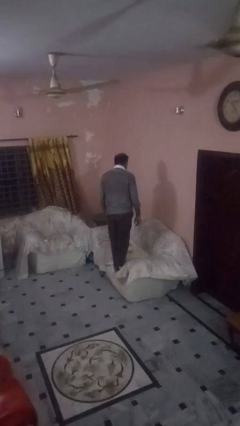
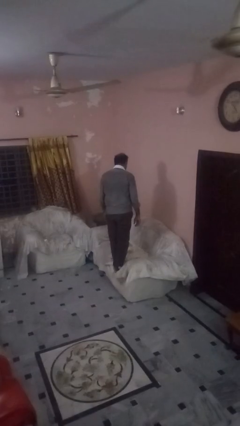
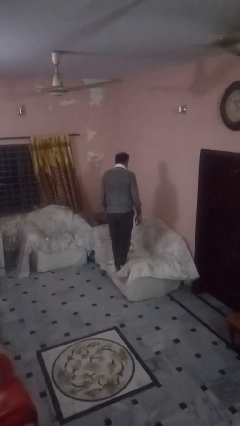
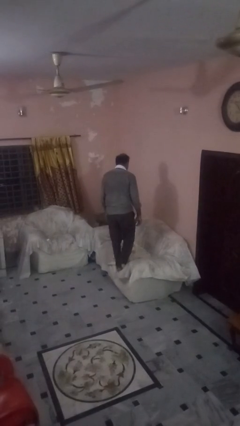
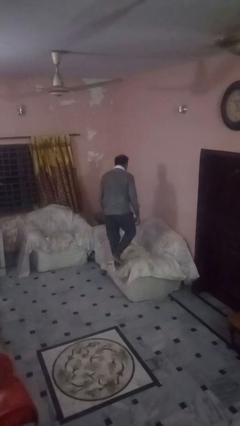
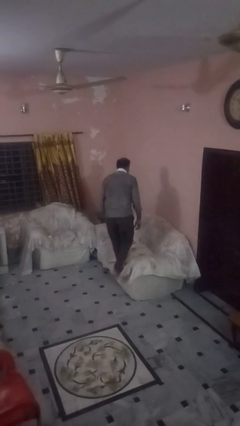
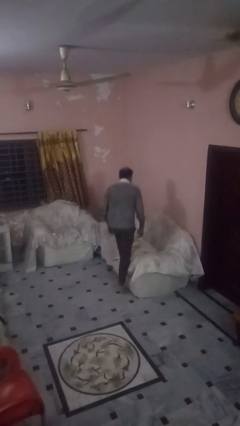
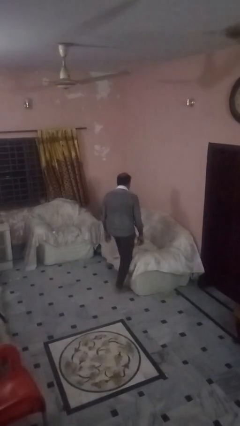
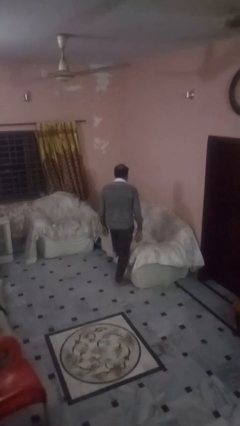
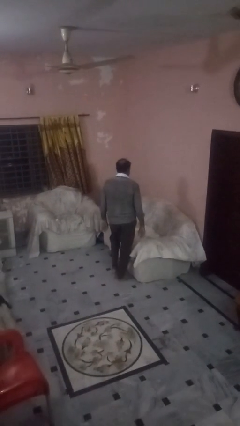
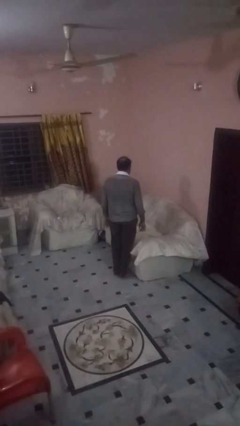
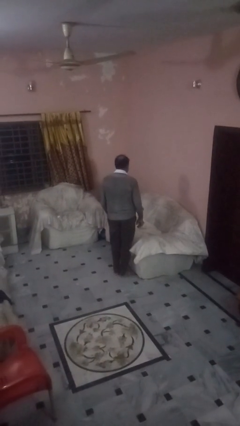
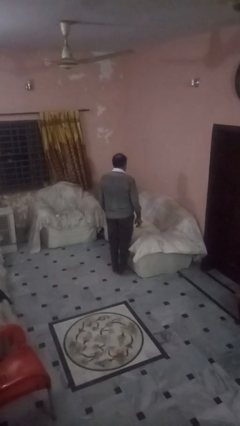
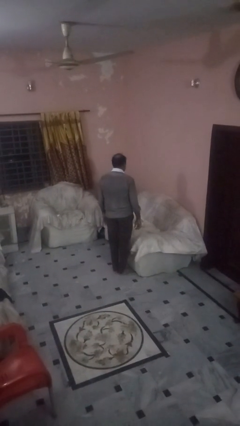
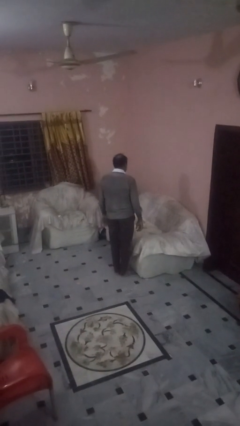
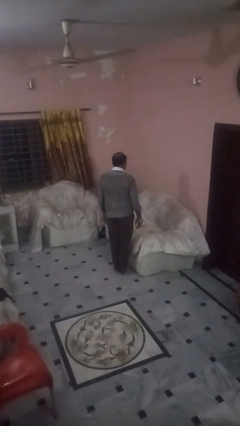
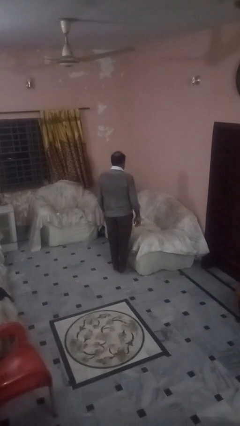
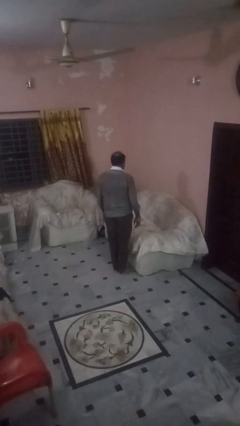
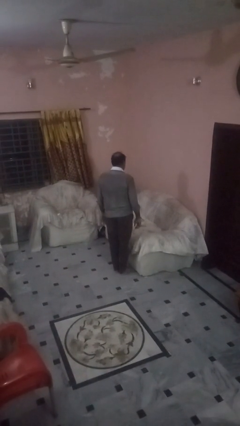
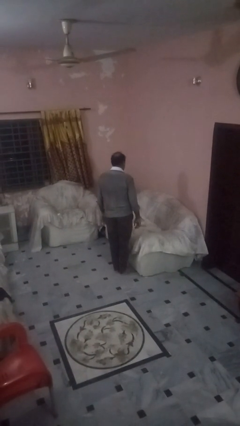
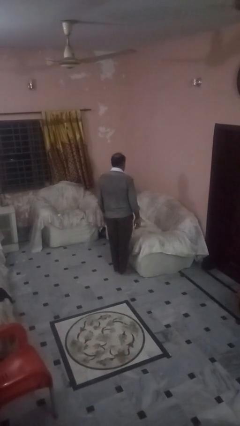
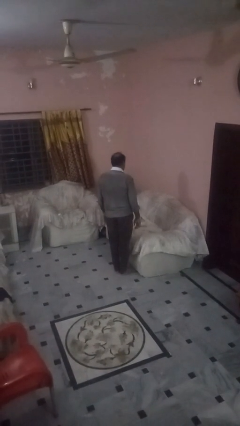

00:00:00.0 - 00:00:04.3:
person climbs off couch

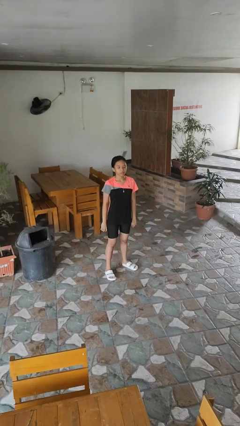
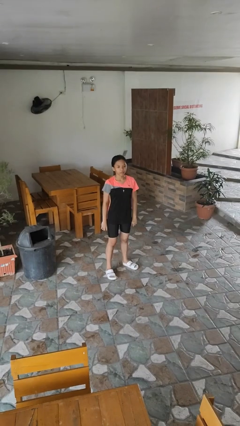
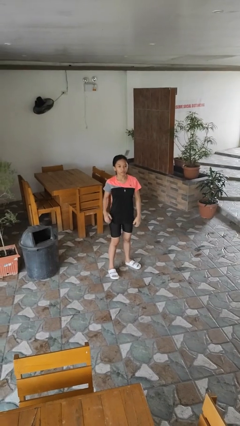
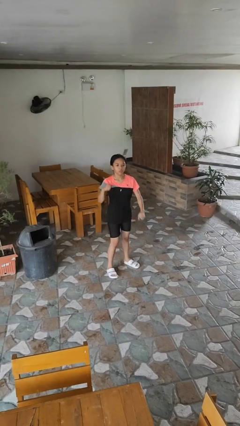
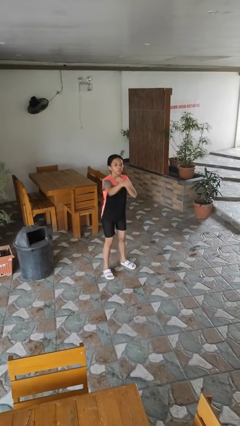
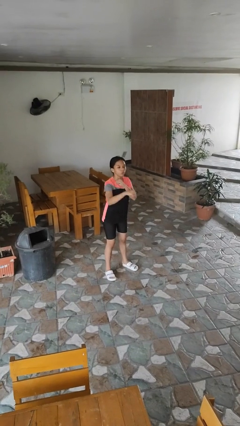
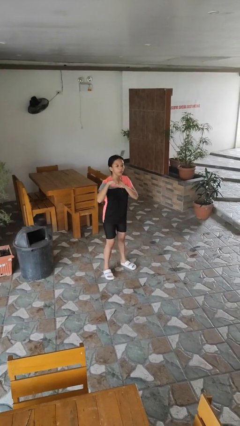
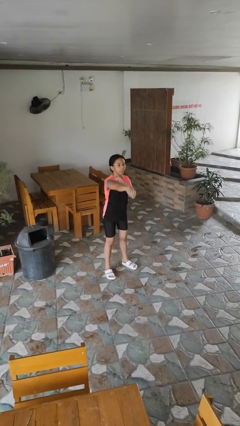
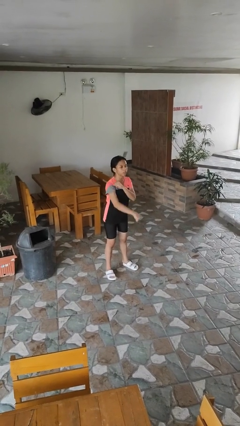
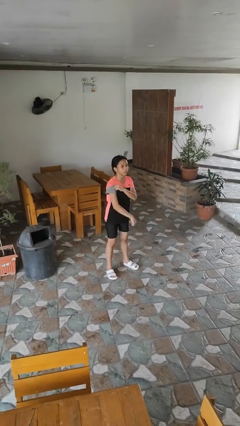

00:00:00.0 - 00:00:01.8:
person punches

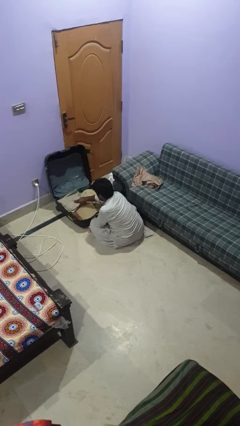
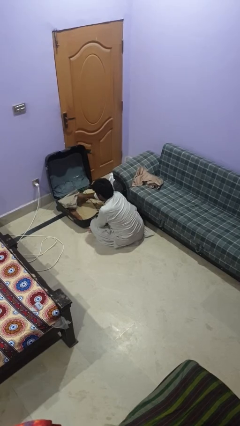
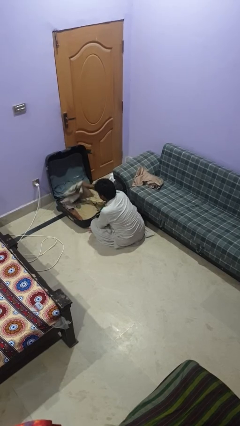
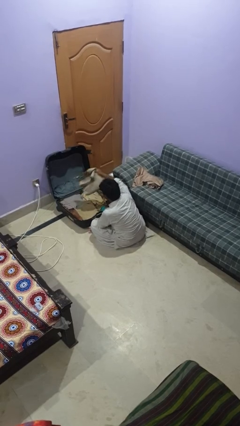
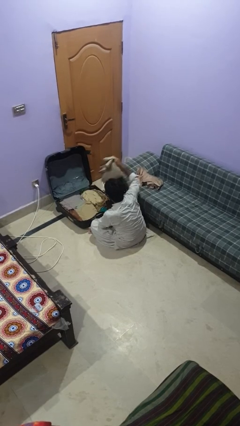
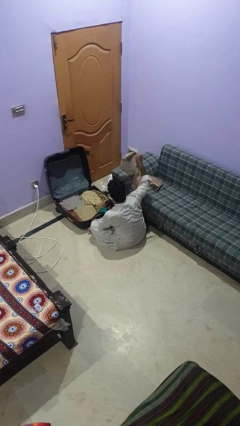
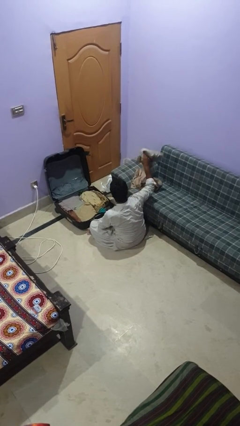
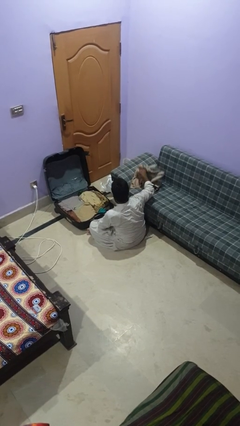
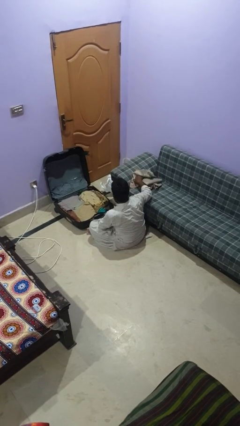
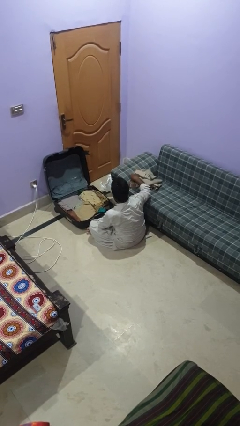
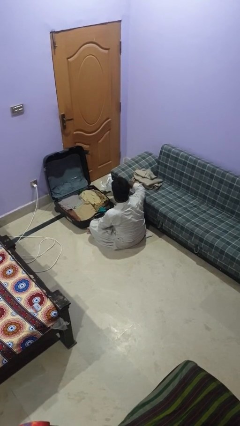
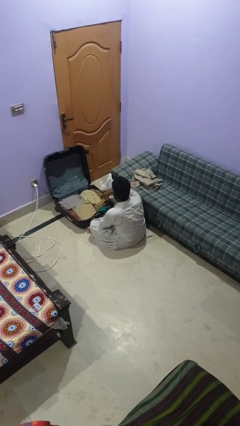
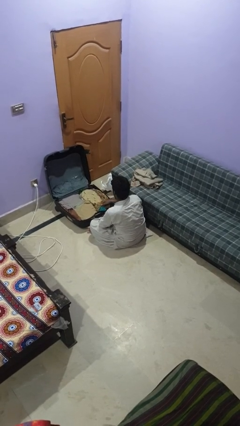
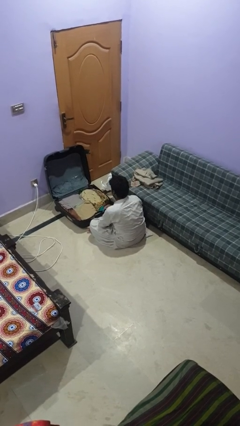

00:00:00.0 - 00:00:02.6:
person unloads clothes from suitcase

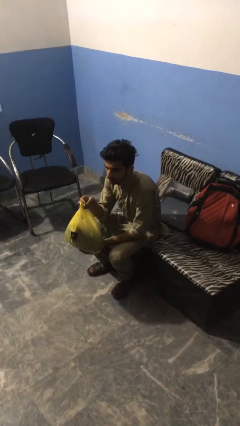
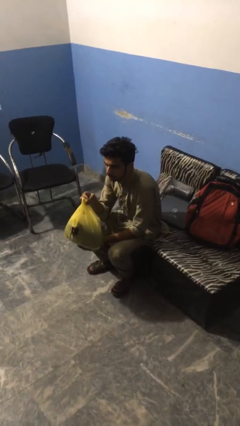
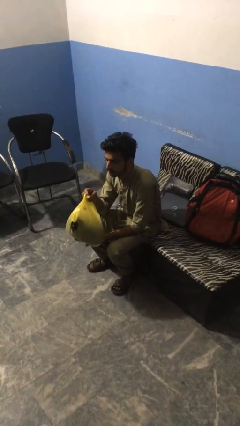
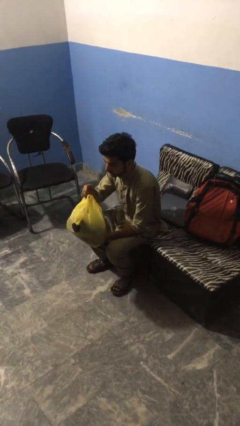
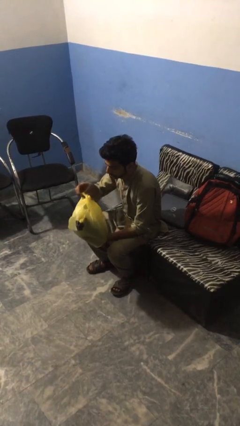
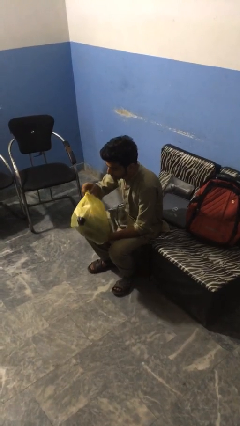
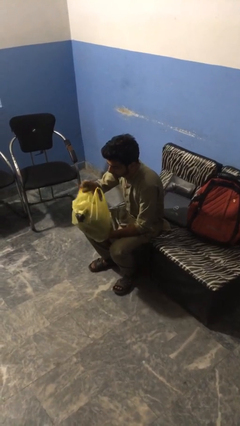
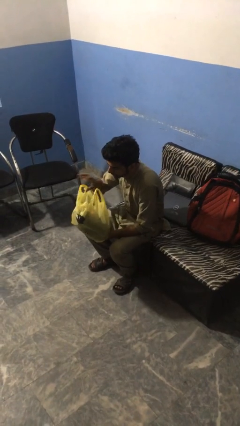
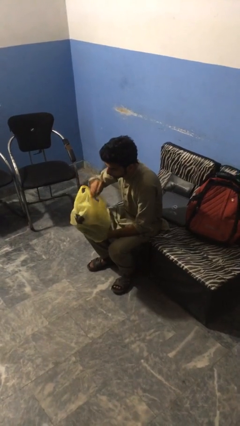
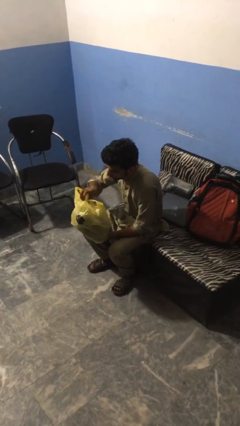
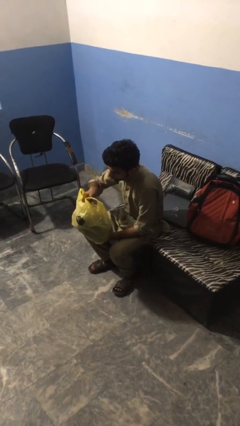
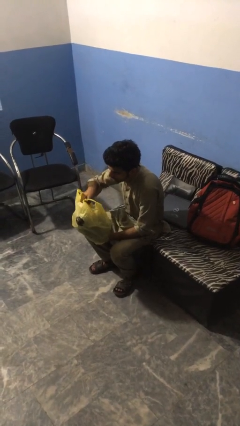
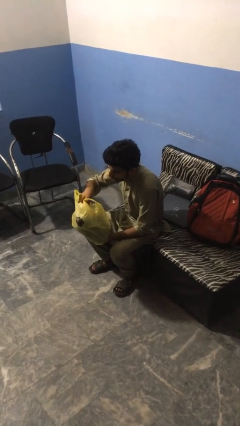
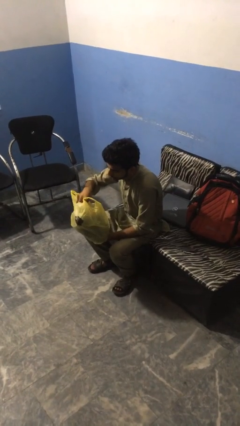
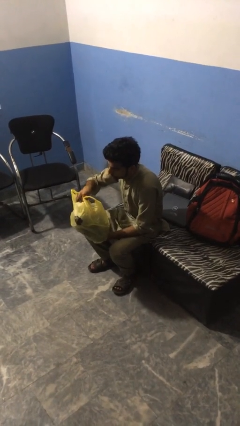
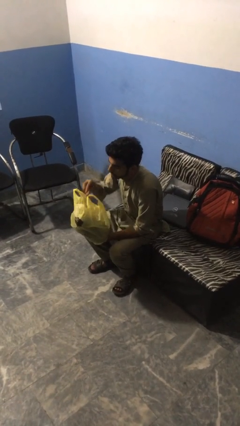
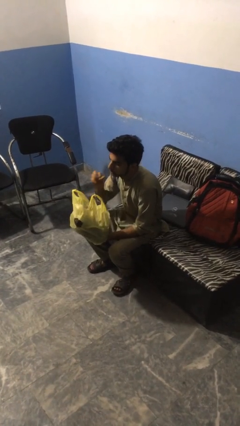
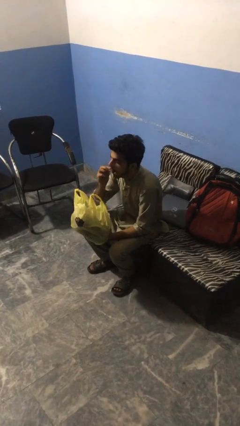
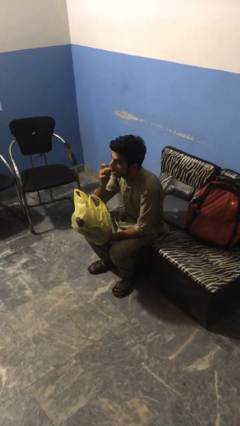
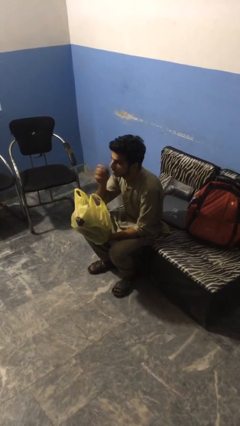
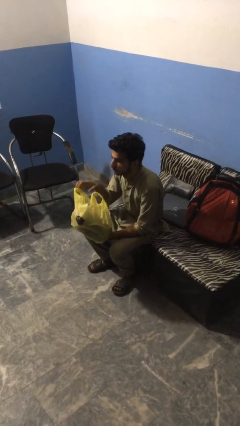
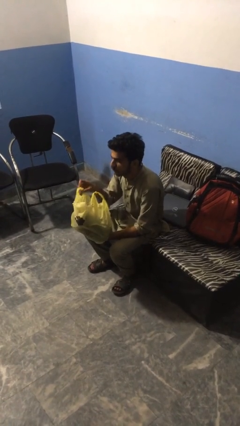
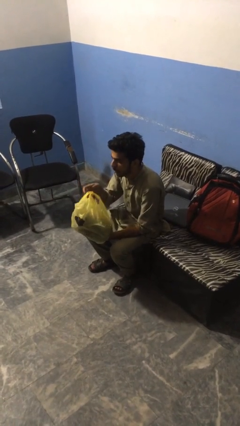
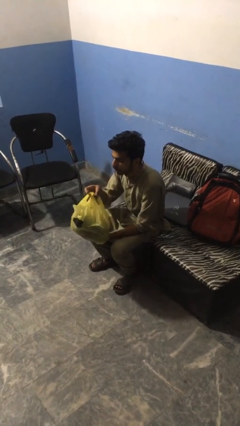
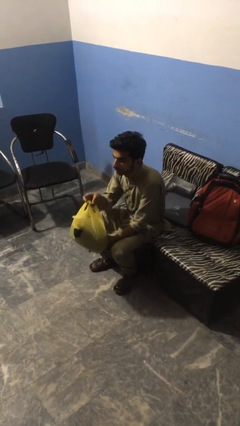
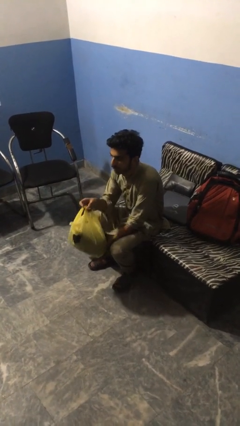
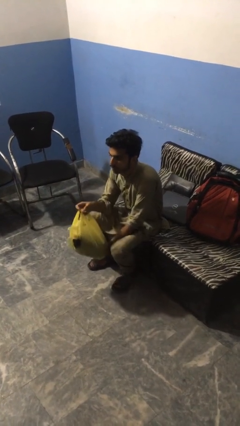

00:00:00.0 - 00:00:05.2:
person eats snack from bag

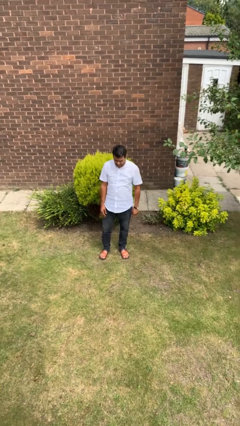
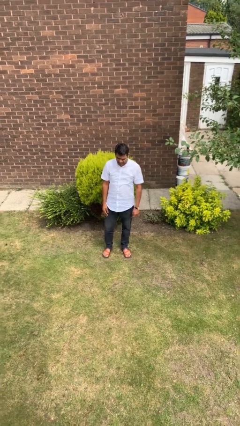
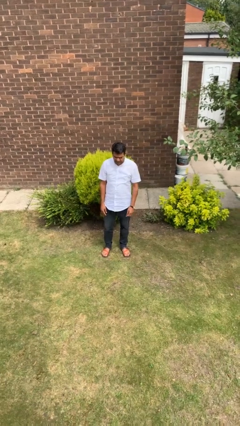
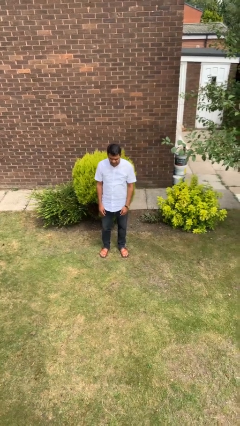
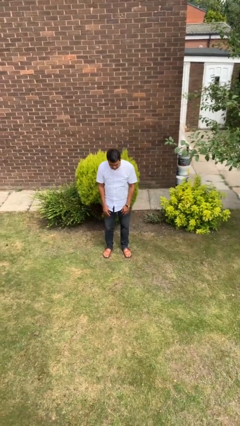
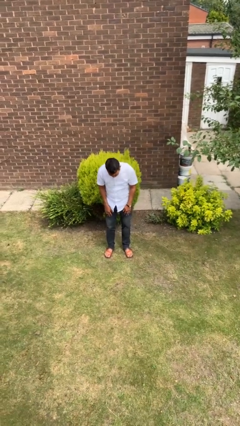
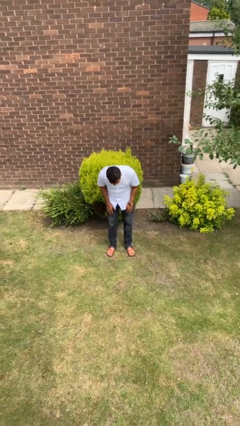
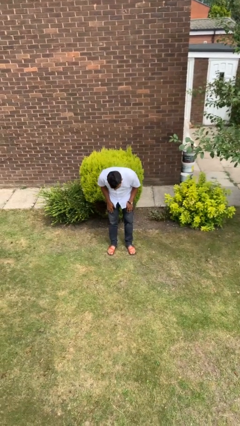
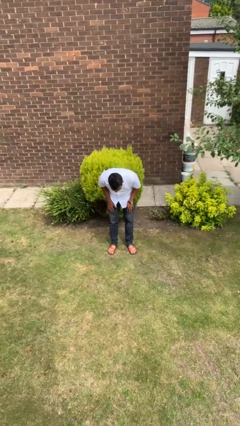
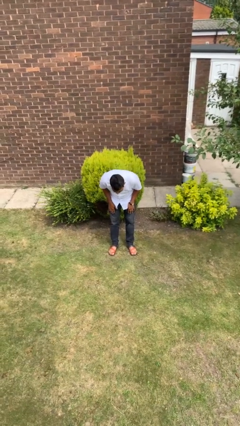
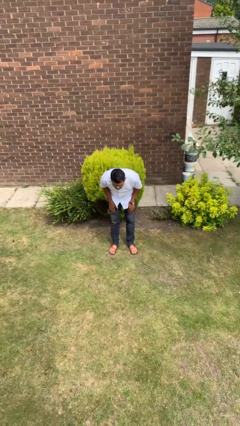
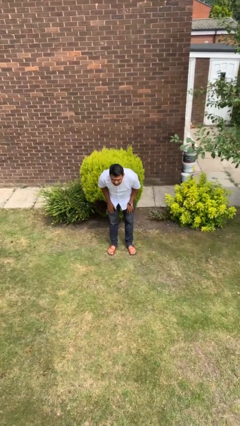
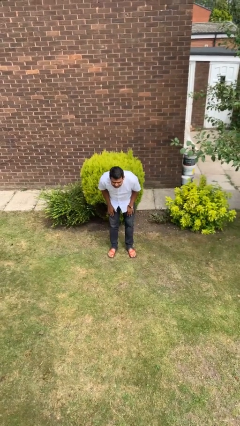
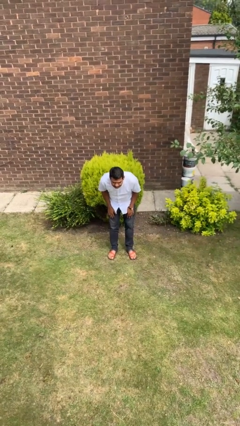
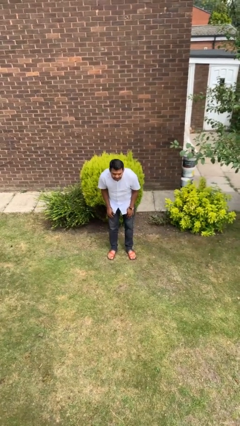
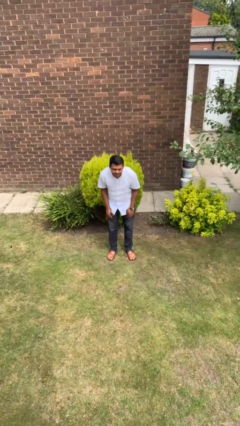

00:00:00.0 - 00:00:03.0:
person bows

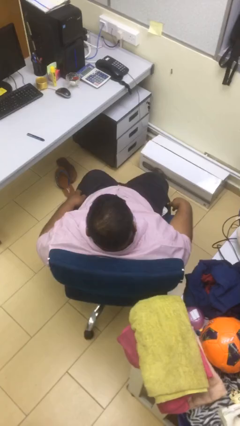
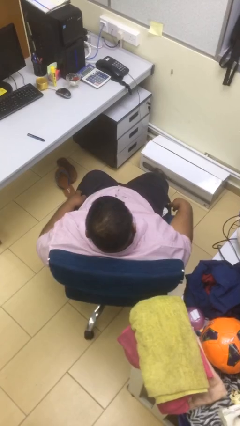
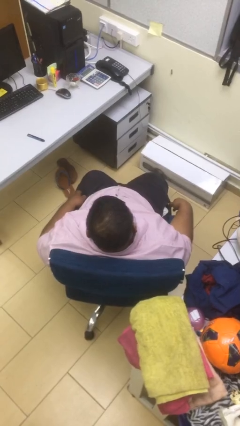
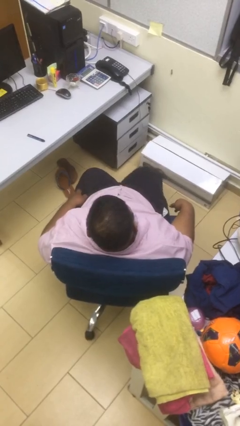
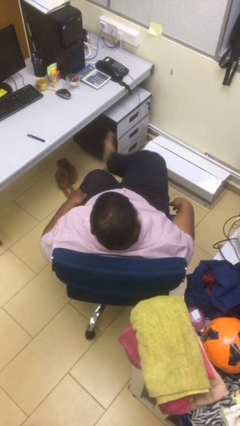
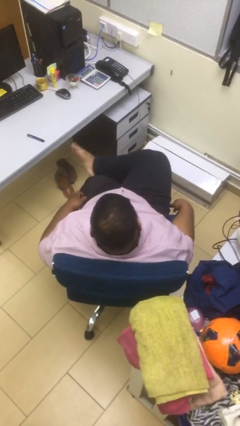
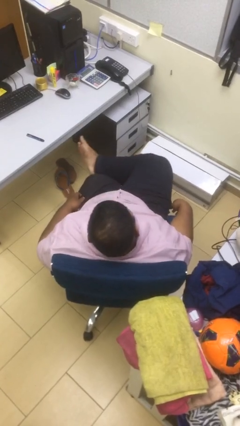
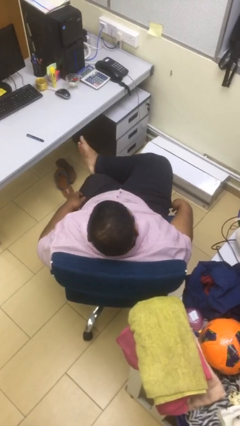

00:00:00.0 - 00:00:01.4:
person crosses legs
